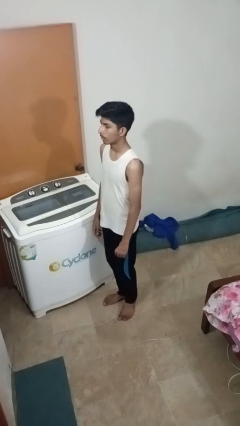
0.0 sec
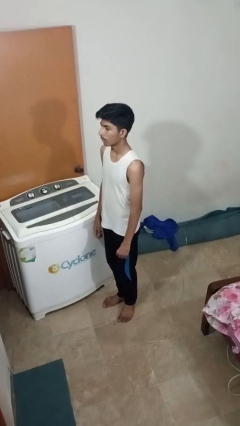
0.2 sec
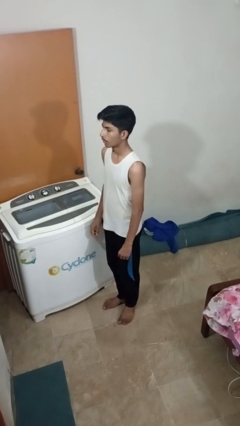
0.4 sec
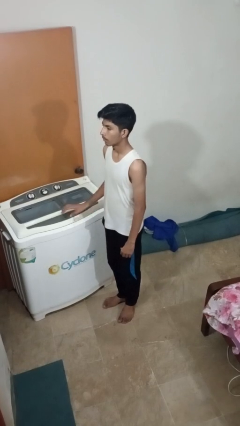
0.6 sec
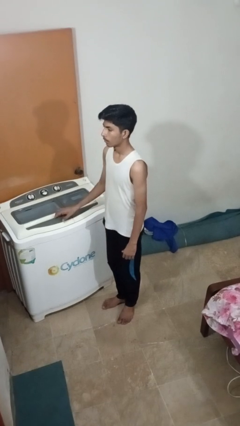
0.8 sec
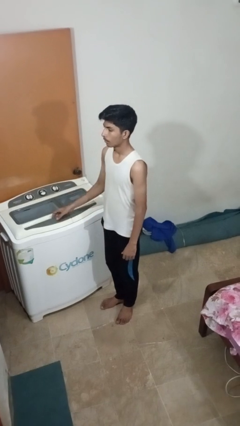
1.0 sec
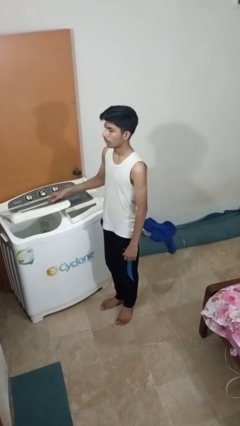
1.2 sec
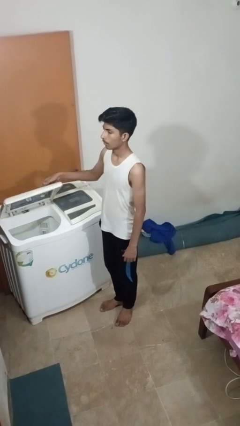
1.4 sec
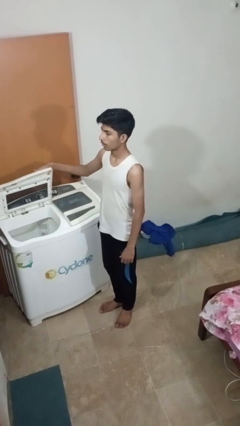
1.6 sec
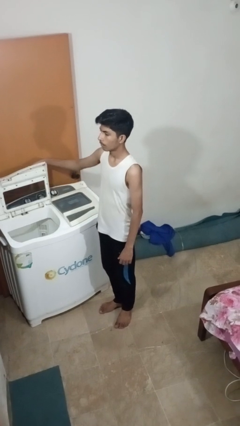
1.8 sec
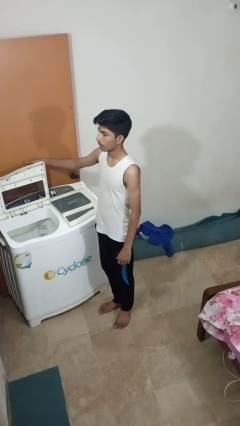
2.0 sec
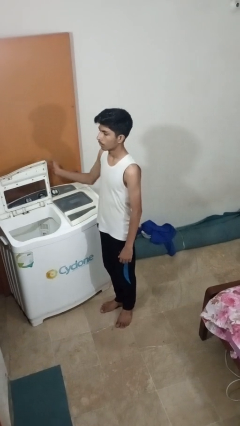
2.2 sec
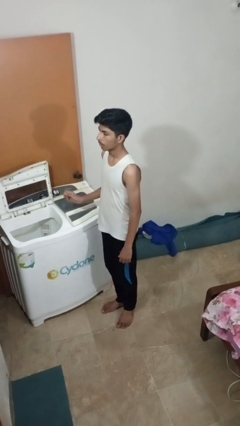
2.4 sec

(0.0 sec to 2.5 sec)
person opens clothes washer

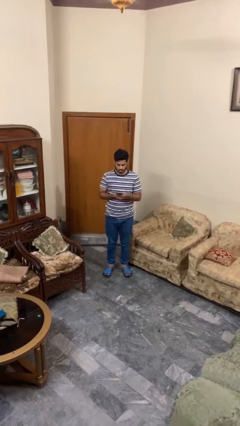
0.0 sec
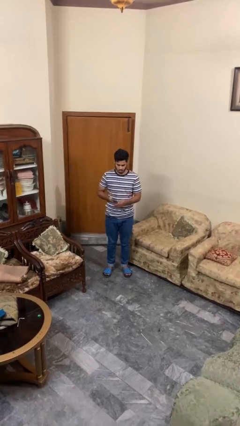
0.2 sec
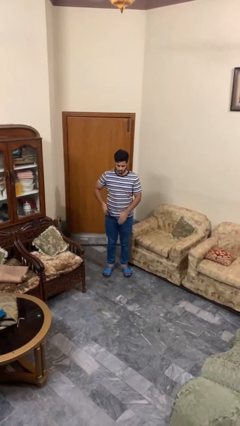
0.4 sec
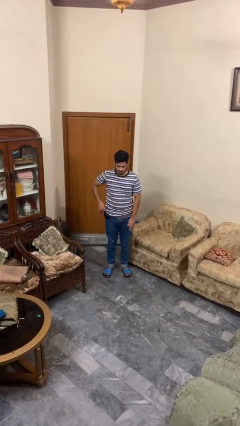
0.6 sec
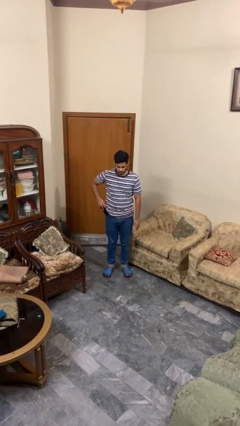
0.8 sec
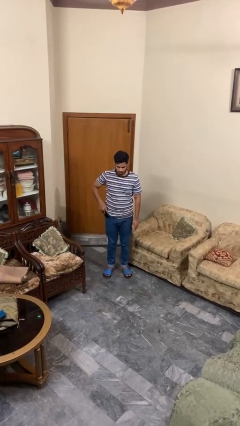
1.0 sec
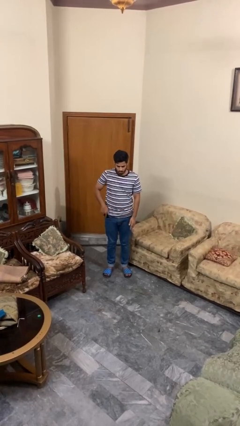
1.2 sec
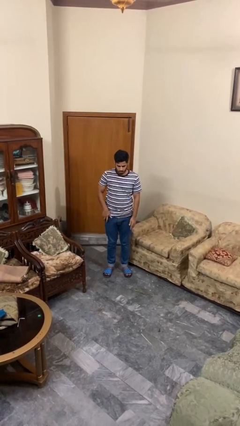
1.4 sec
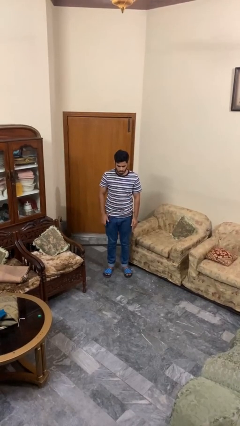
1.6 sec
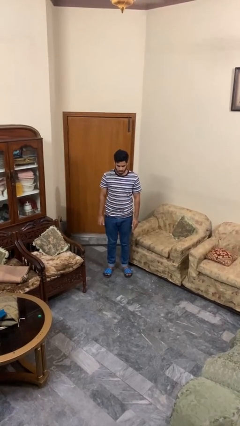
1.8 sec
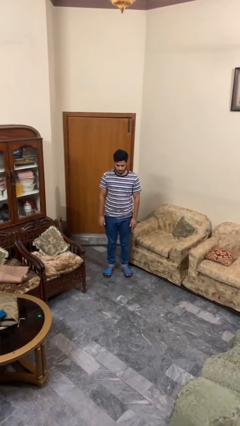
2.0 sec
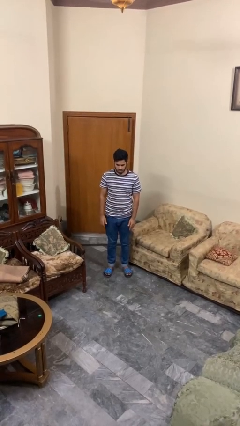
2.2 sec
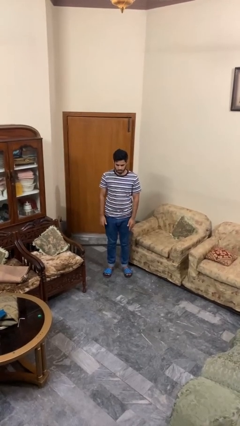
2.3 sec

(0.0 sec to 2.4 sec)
person puts phone into pocket

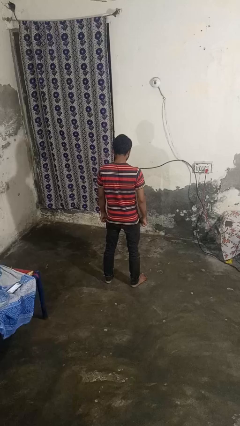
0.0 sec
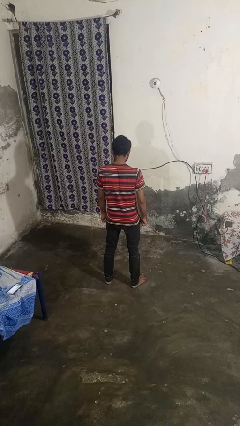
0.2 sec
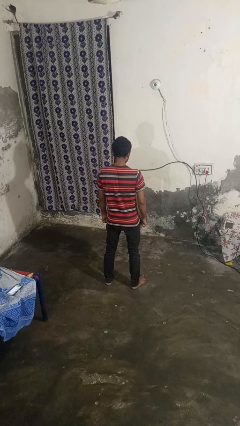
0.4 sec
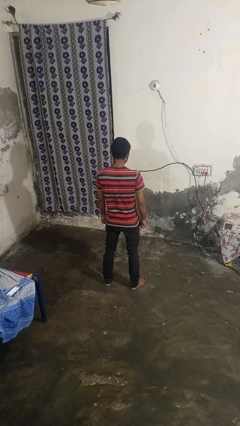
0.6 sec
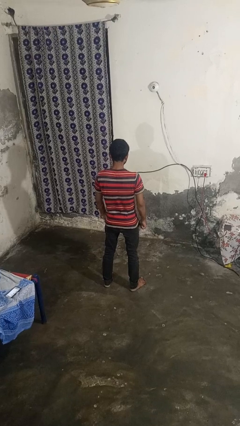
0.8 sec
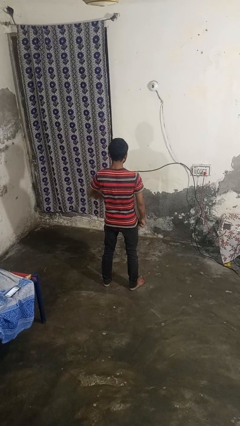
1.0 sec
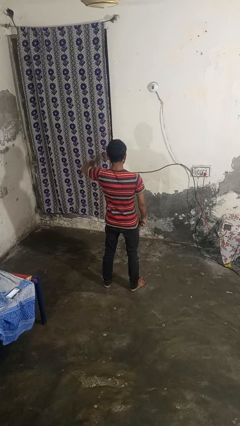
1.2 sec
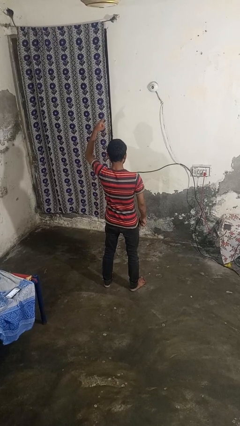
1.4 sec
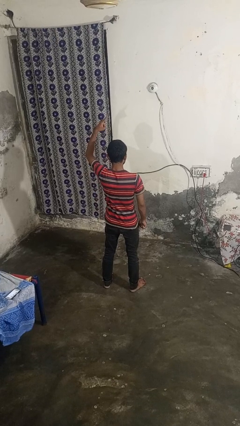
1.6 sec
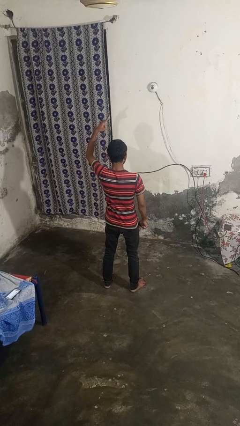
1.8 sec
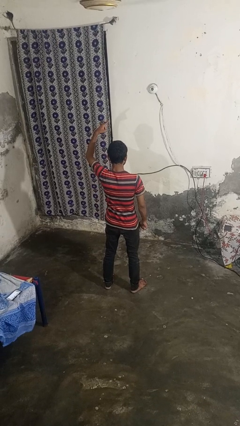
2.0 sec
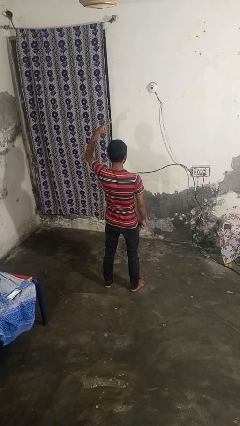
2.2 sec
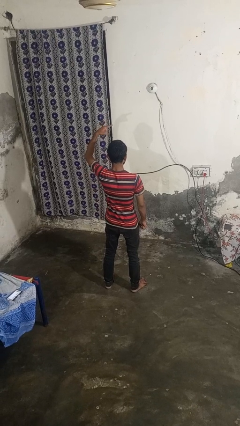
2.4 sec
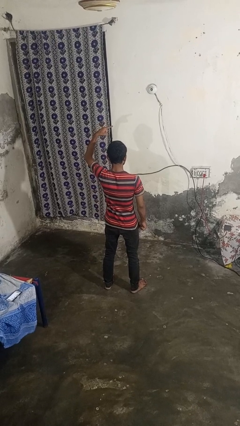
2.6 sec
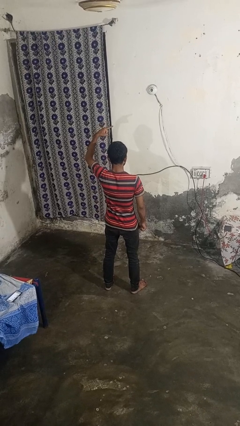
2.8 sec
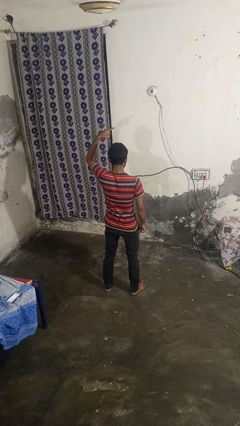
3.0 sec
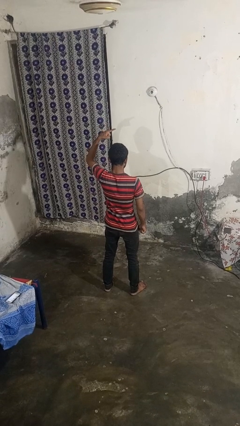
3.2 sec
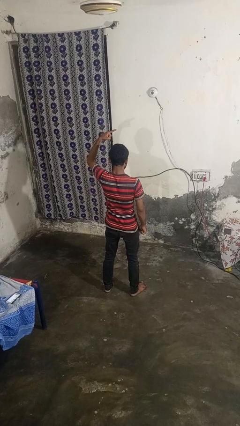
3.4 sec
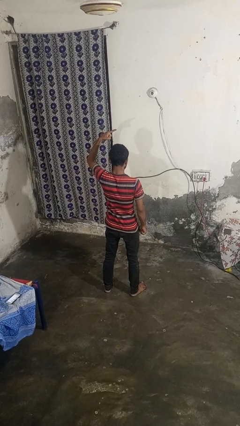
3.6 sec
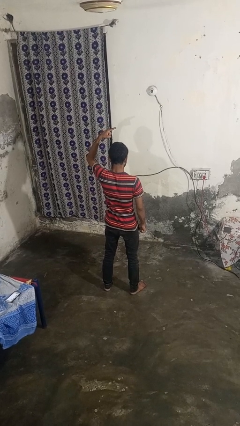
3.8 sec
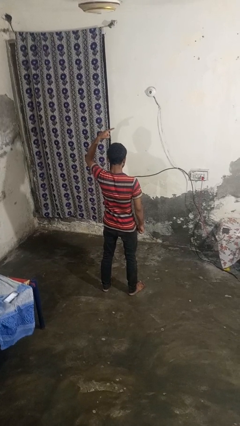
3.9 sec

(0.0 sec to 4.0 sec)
person gestures swipe up

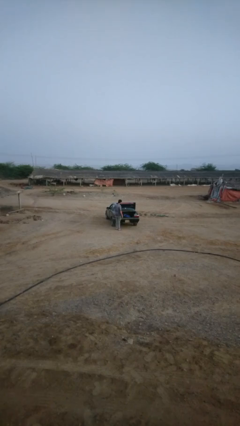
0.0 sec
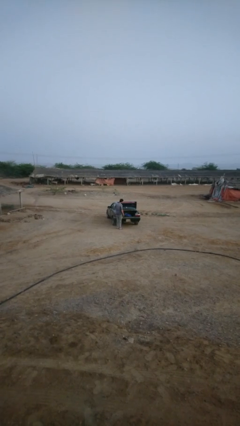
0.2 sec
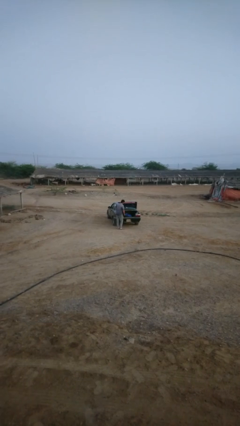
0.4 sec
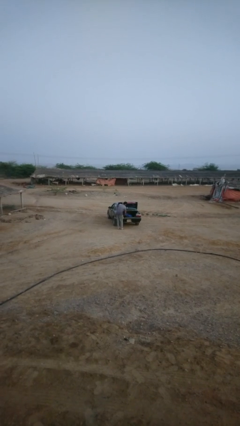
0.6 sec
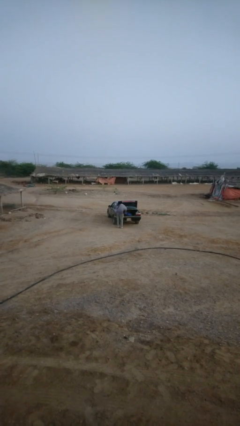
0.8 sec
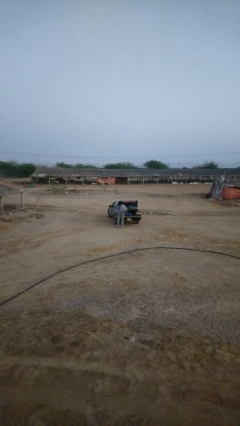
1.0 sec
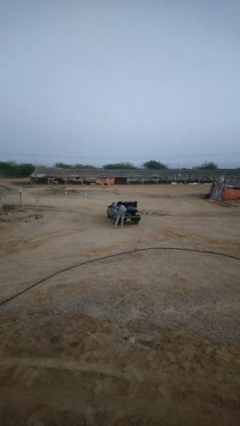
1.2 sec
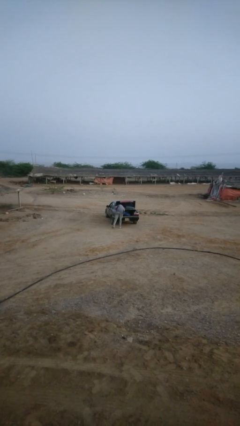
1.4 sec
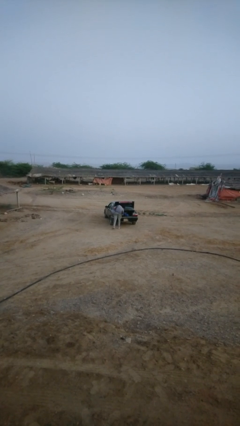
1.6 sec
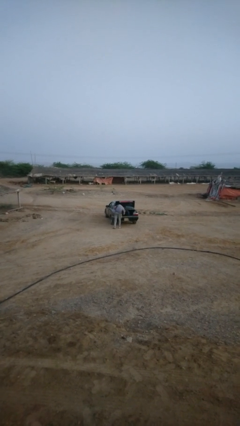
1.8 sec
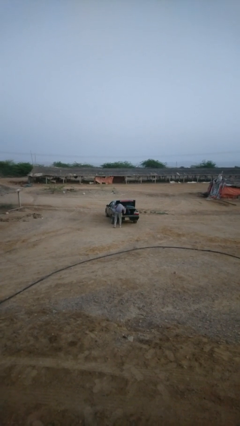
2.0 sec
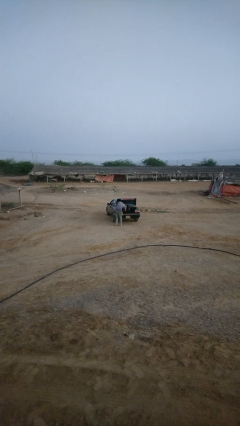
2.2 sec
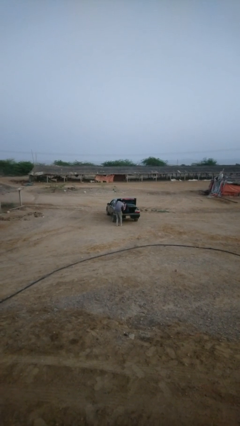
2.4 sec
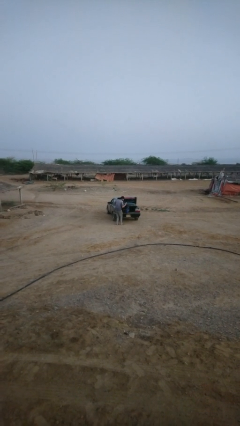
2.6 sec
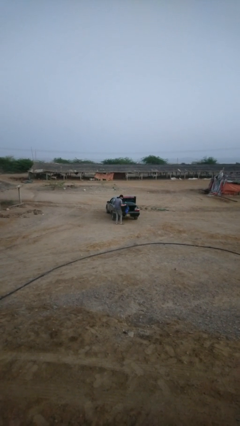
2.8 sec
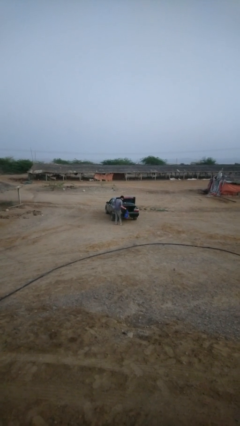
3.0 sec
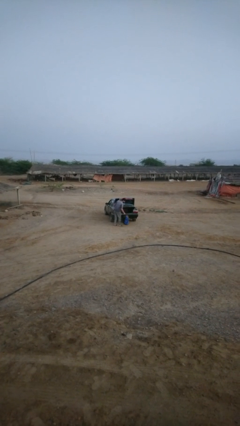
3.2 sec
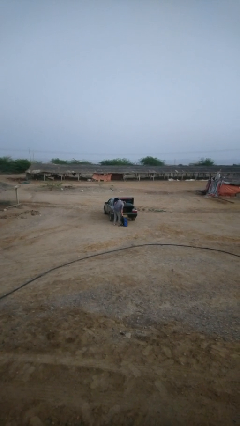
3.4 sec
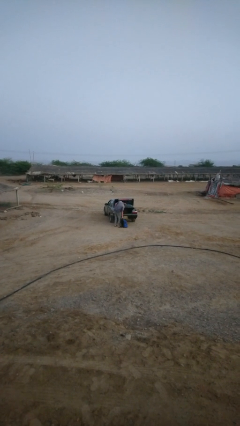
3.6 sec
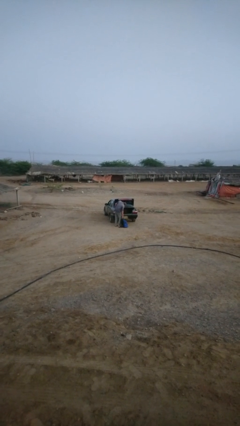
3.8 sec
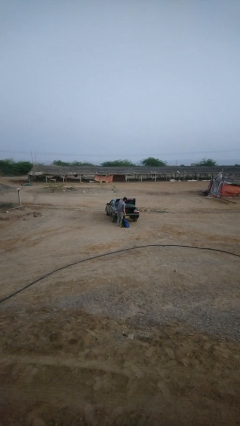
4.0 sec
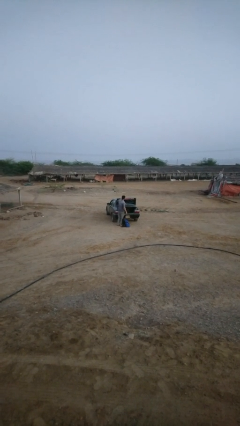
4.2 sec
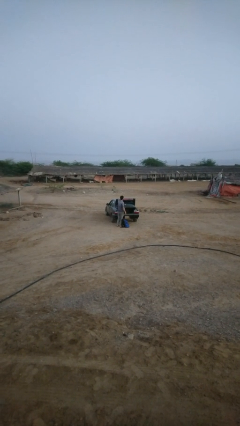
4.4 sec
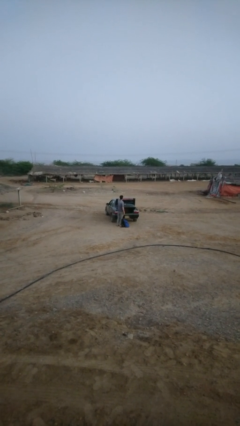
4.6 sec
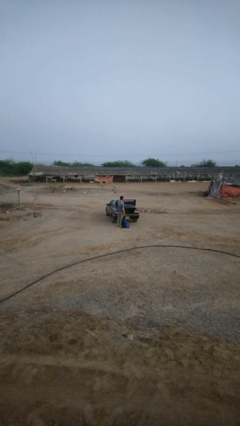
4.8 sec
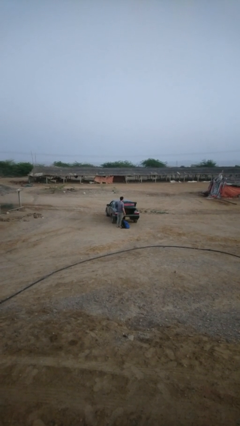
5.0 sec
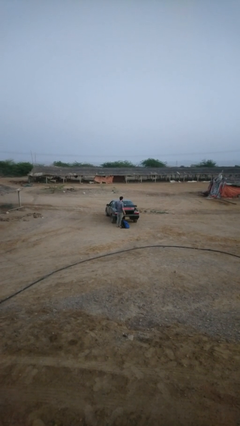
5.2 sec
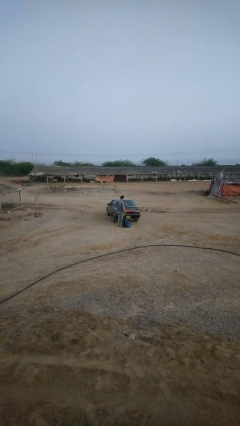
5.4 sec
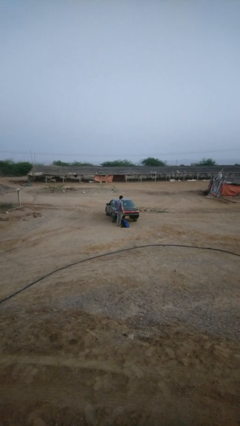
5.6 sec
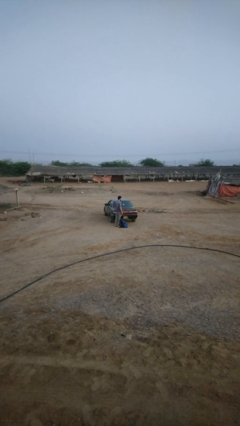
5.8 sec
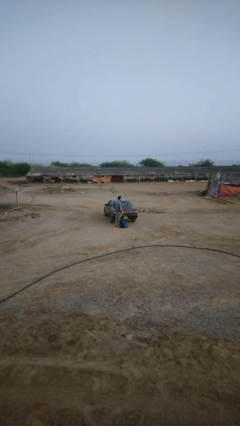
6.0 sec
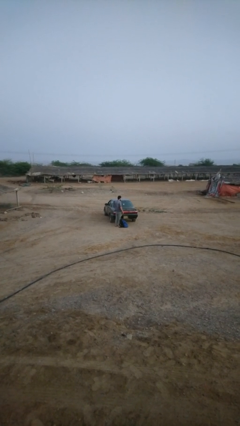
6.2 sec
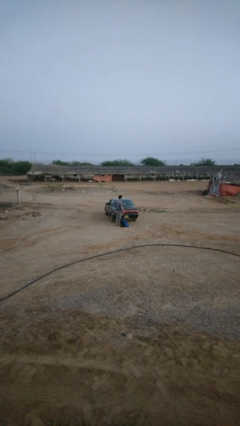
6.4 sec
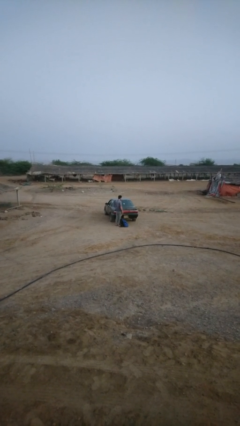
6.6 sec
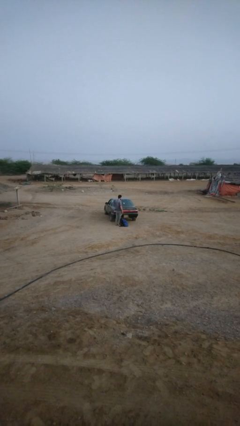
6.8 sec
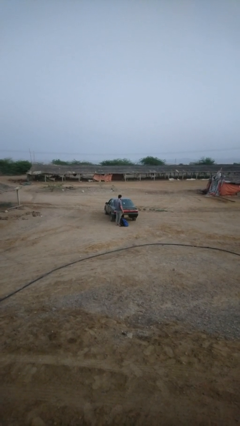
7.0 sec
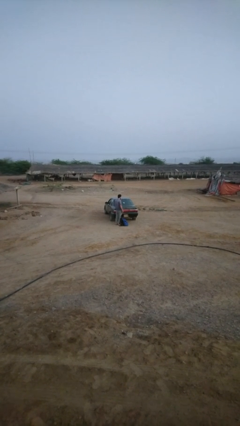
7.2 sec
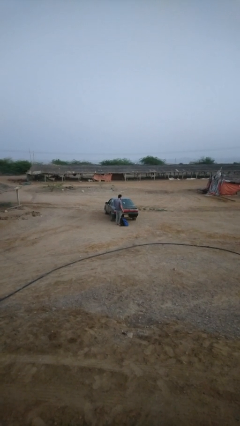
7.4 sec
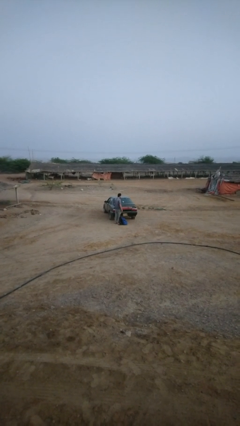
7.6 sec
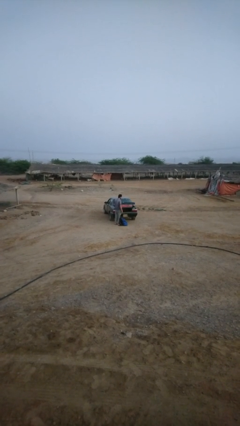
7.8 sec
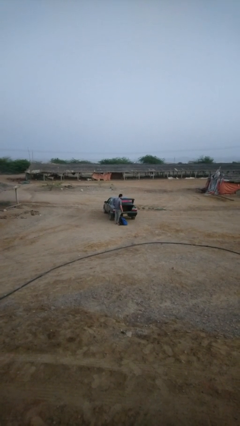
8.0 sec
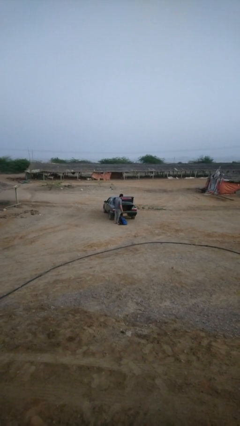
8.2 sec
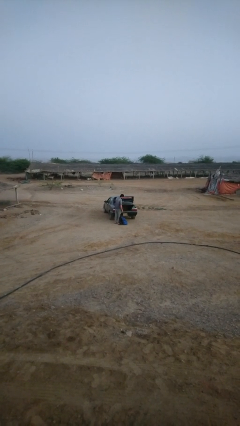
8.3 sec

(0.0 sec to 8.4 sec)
person unloads car

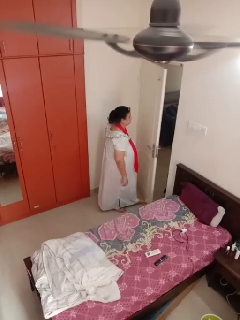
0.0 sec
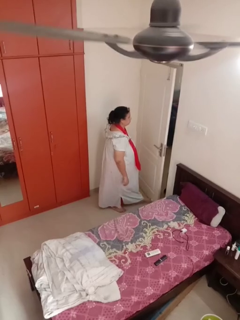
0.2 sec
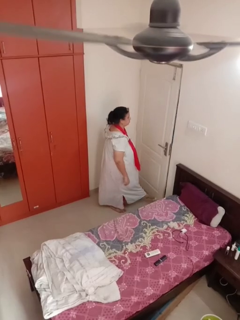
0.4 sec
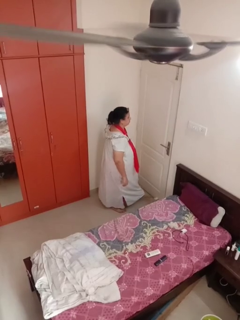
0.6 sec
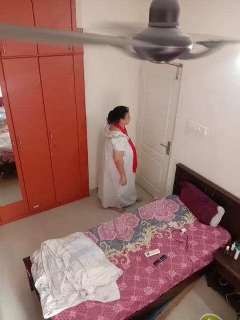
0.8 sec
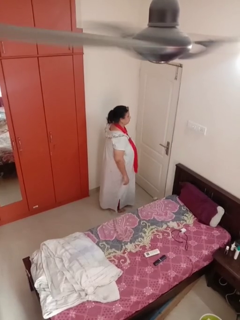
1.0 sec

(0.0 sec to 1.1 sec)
person closes door with foot
